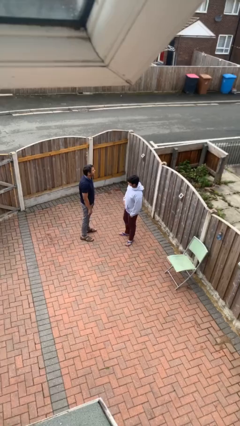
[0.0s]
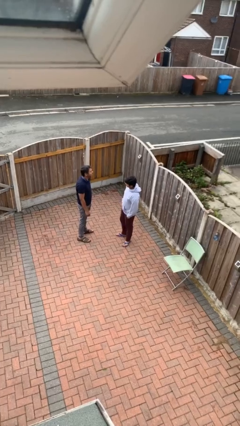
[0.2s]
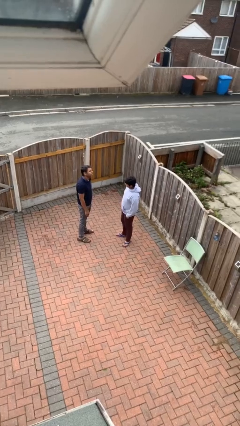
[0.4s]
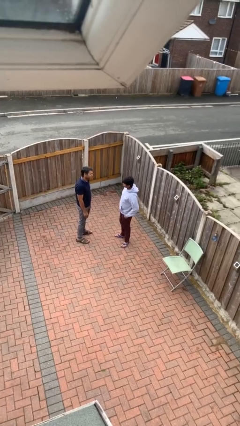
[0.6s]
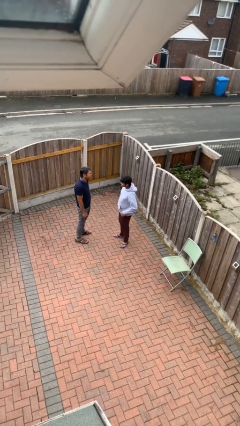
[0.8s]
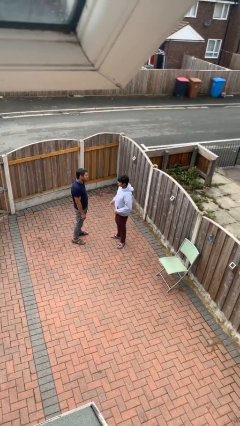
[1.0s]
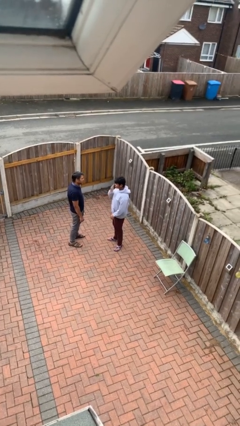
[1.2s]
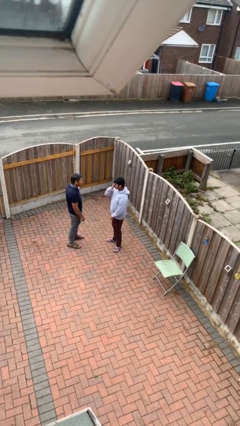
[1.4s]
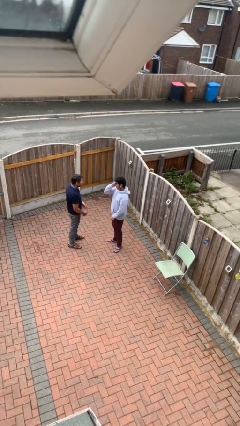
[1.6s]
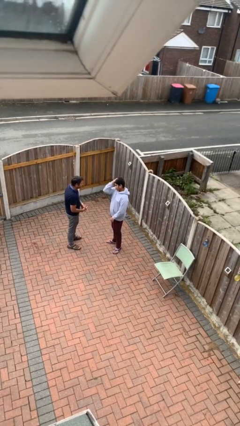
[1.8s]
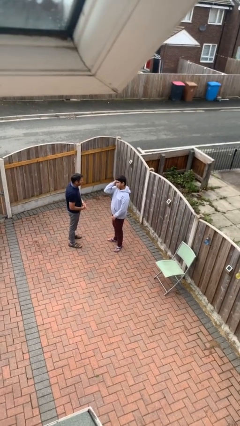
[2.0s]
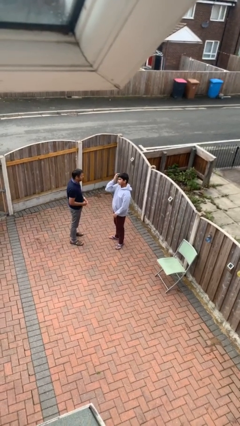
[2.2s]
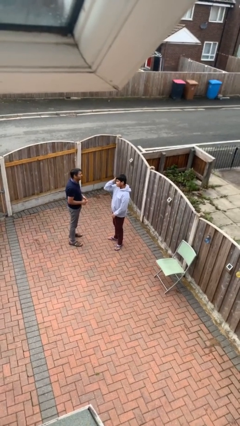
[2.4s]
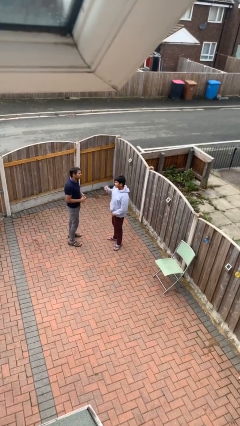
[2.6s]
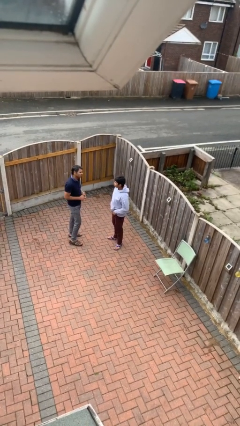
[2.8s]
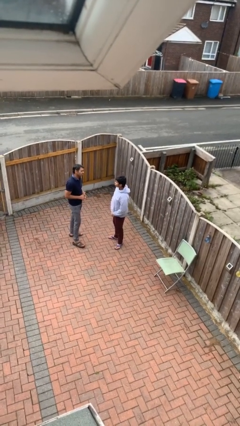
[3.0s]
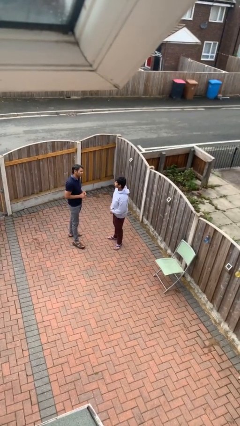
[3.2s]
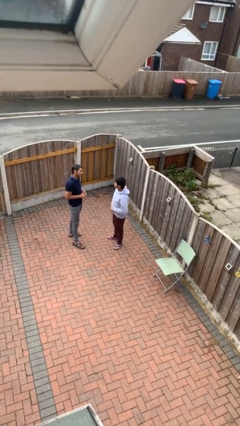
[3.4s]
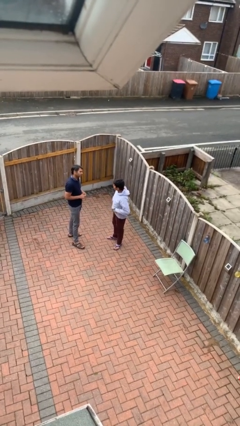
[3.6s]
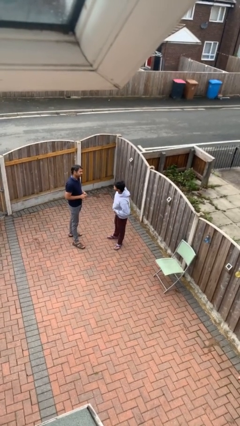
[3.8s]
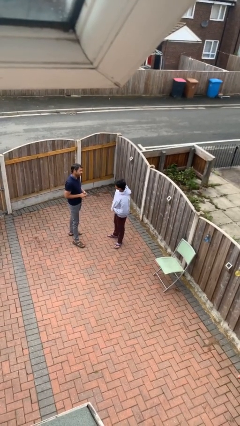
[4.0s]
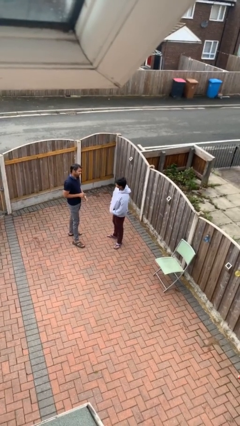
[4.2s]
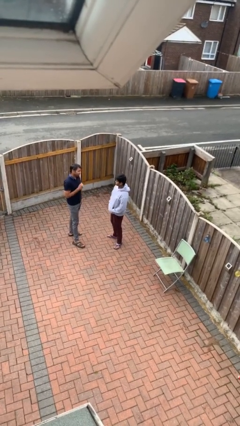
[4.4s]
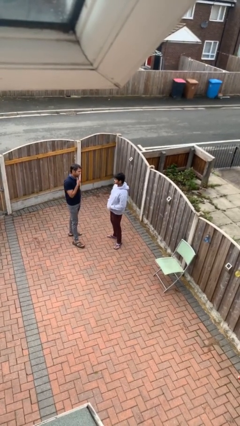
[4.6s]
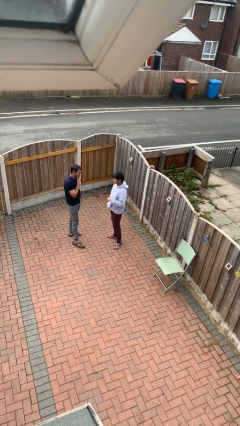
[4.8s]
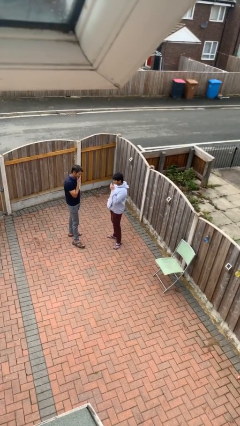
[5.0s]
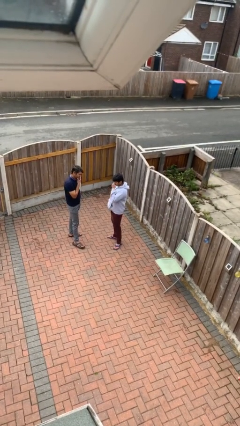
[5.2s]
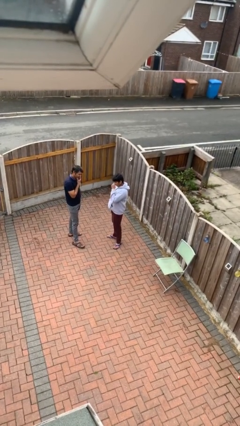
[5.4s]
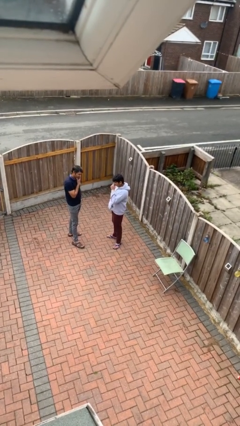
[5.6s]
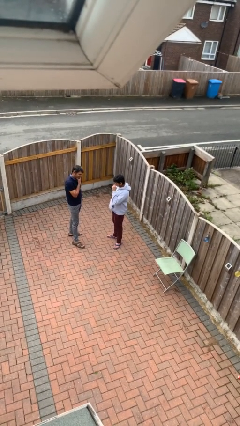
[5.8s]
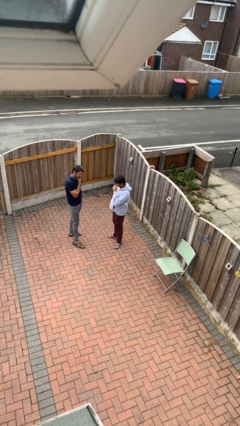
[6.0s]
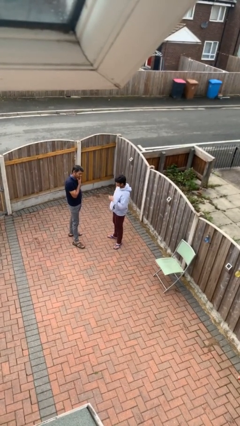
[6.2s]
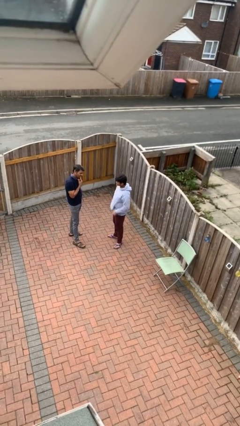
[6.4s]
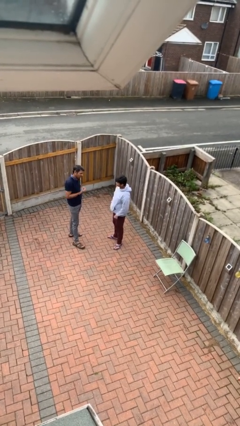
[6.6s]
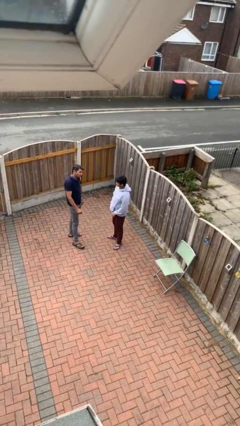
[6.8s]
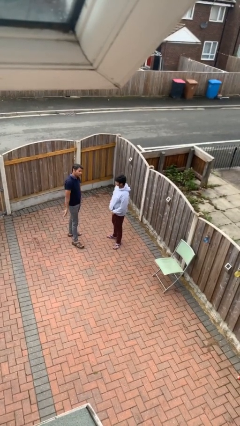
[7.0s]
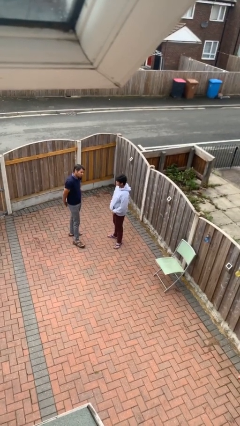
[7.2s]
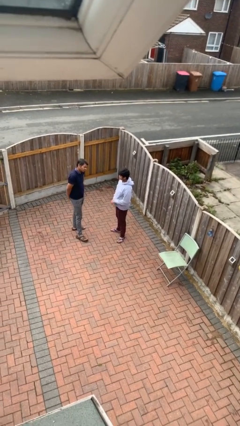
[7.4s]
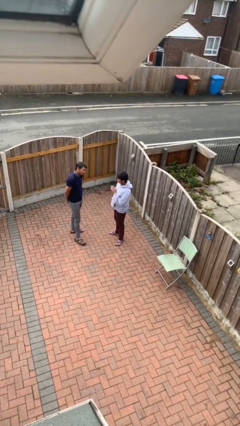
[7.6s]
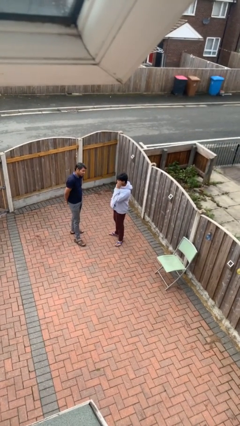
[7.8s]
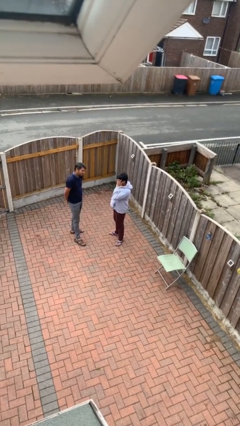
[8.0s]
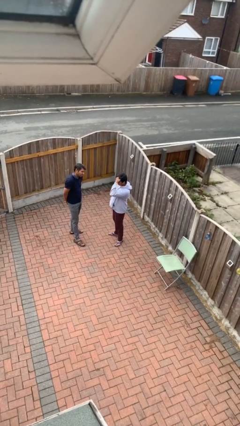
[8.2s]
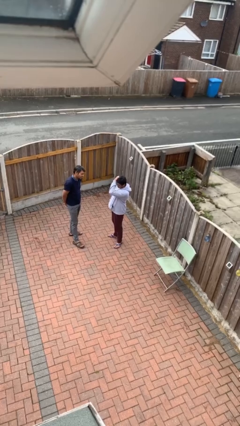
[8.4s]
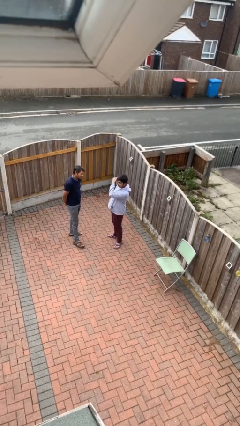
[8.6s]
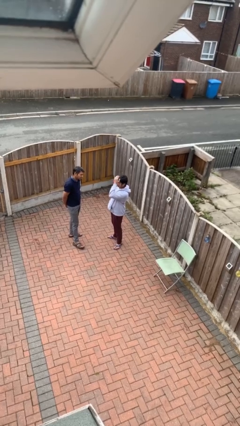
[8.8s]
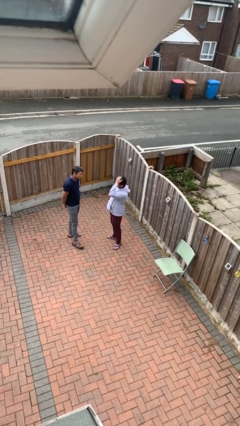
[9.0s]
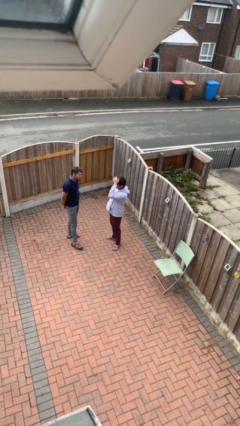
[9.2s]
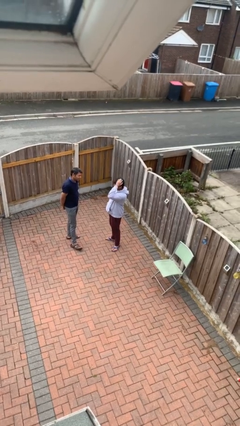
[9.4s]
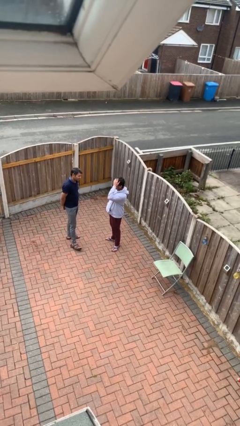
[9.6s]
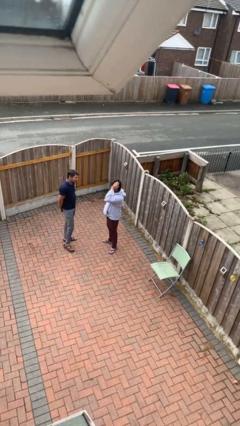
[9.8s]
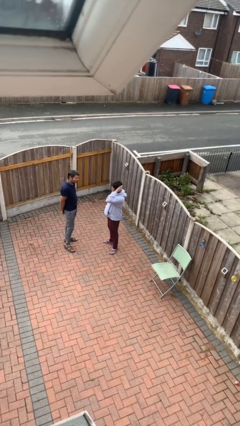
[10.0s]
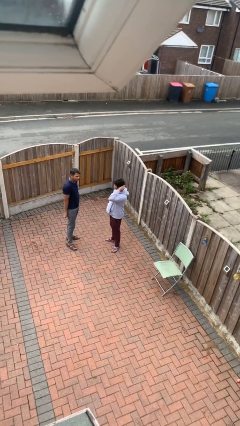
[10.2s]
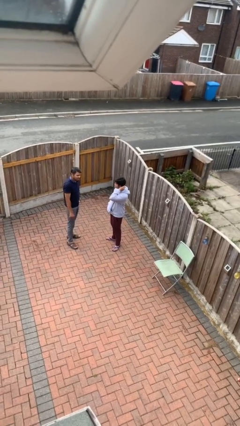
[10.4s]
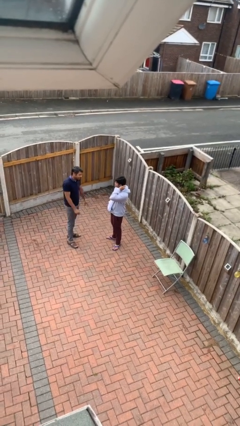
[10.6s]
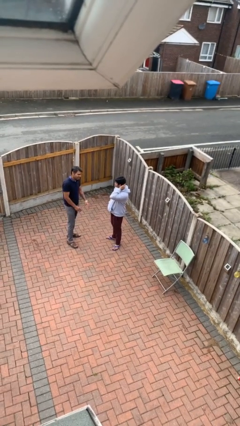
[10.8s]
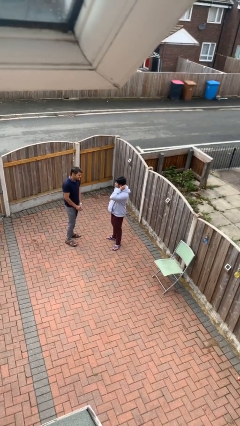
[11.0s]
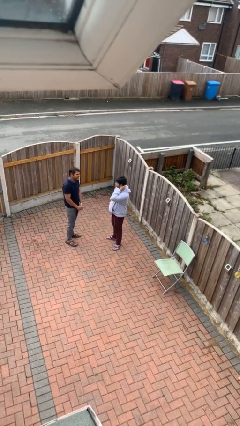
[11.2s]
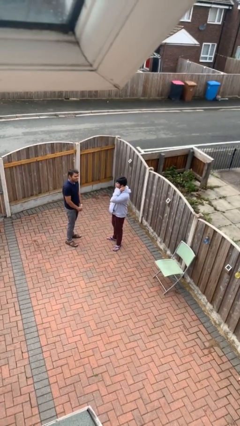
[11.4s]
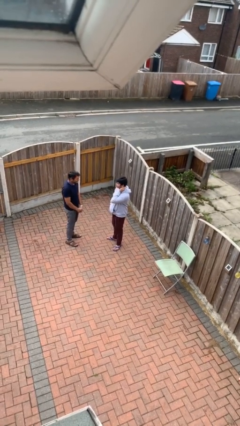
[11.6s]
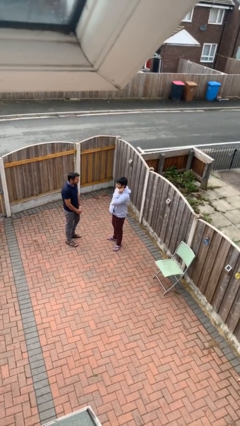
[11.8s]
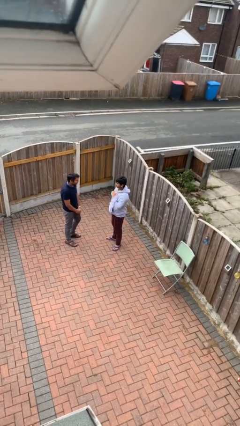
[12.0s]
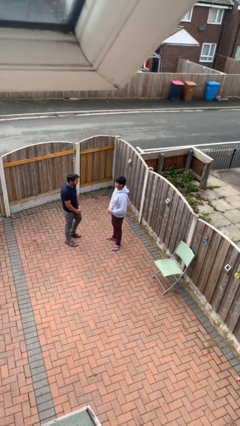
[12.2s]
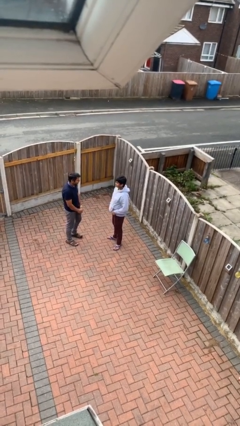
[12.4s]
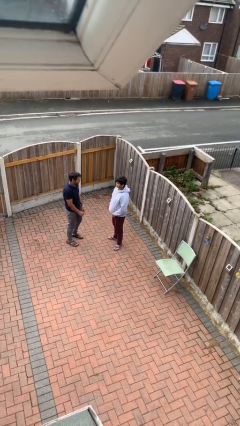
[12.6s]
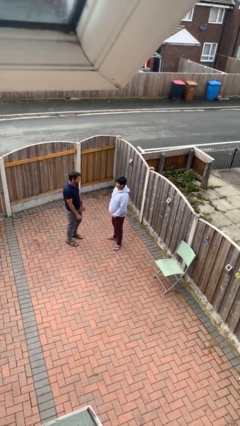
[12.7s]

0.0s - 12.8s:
person talks to person

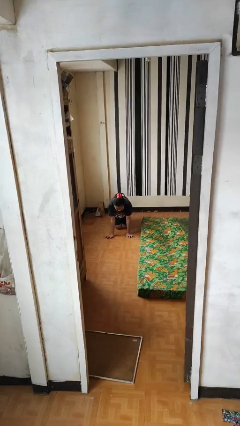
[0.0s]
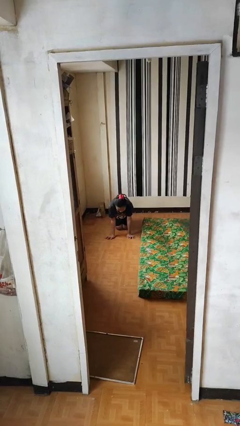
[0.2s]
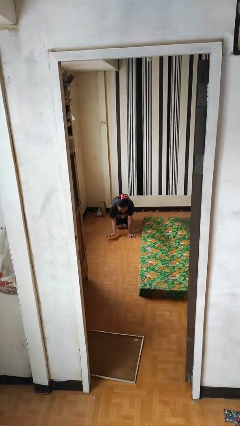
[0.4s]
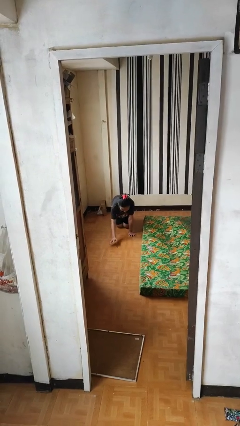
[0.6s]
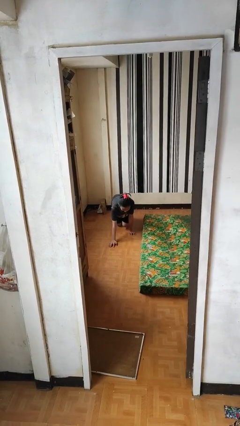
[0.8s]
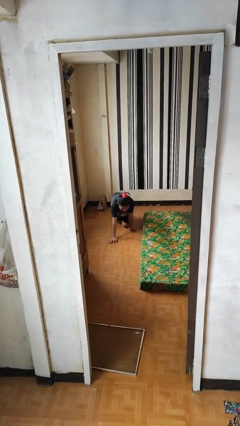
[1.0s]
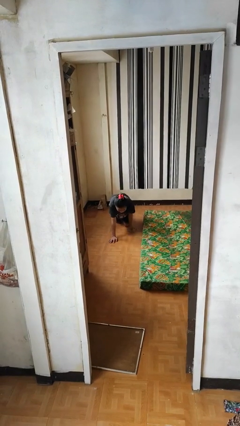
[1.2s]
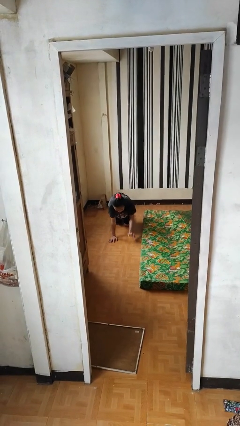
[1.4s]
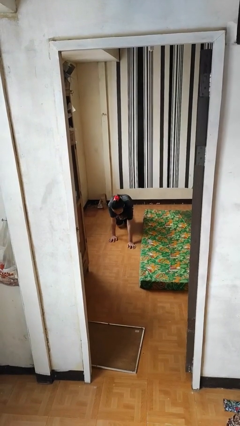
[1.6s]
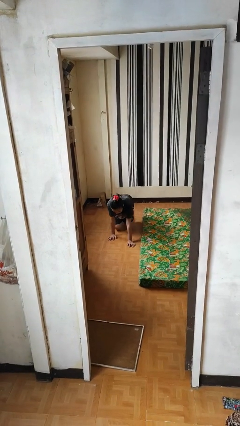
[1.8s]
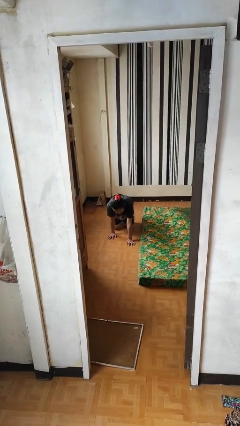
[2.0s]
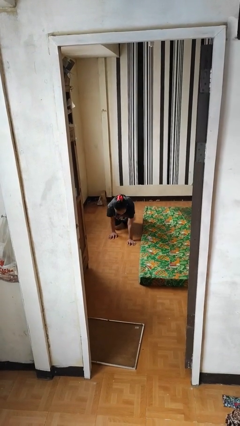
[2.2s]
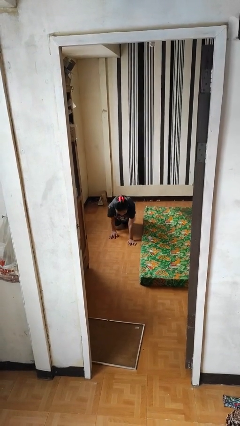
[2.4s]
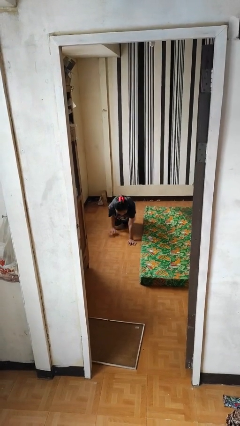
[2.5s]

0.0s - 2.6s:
person crawls

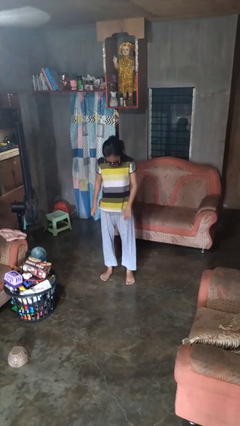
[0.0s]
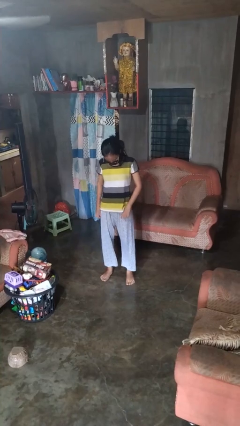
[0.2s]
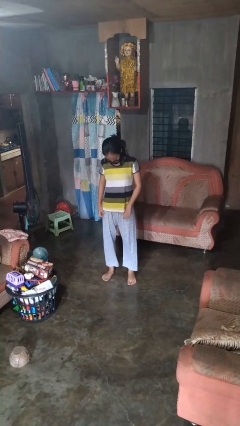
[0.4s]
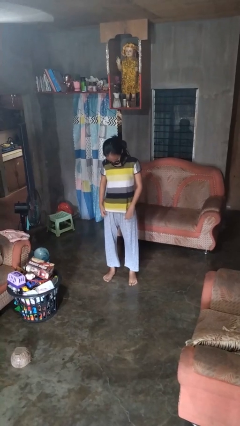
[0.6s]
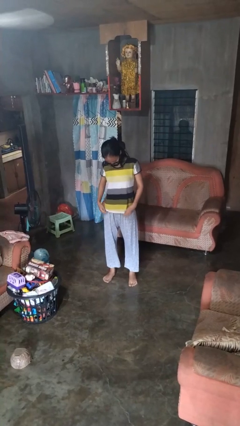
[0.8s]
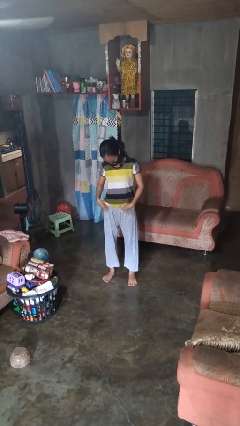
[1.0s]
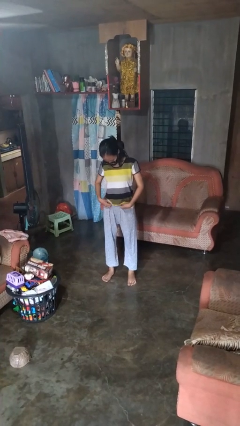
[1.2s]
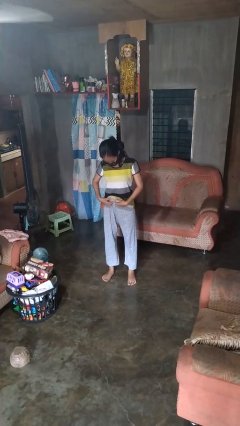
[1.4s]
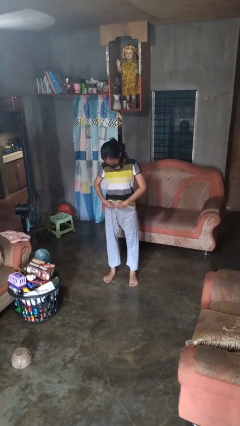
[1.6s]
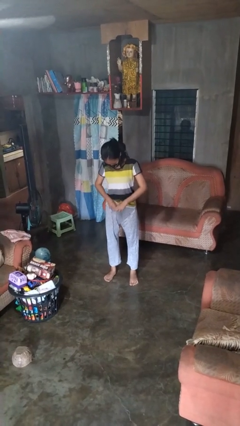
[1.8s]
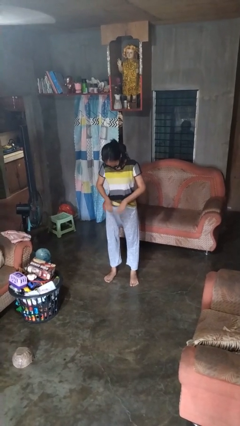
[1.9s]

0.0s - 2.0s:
person tucks in shirt

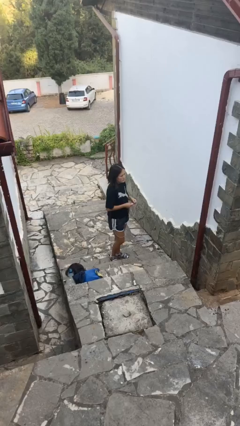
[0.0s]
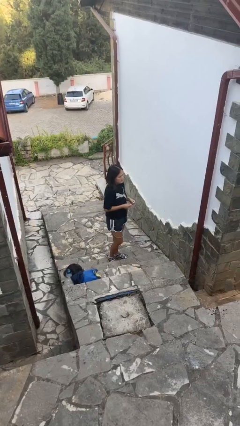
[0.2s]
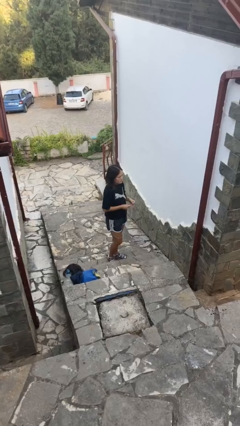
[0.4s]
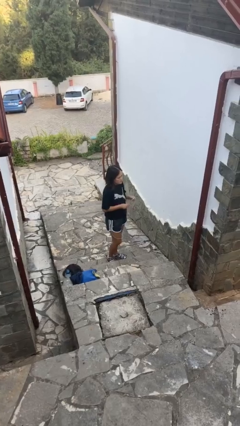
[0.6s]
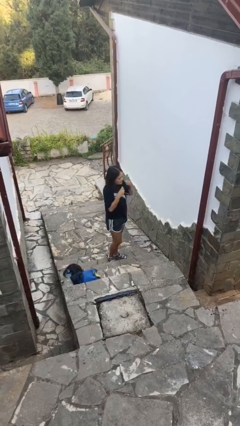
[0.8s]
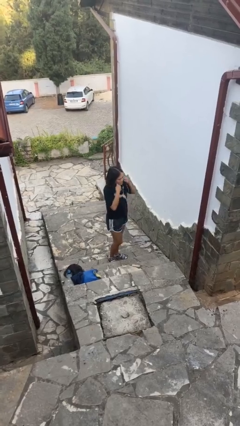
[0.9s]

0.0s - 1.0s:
person puts on headphones
